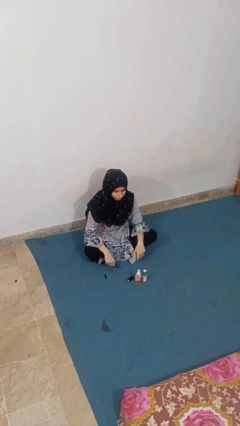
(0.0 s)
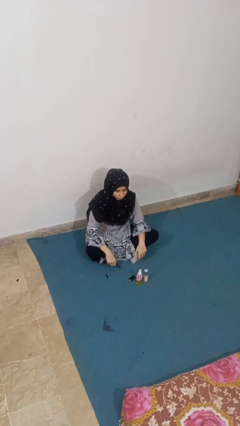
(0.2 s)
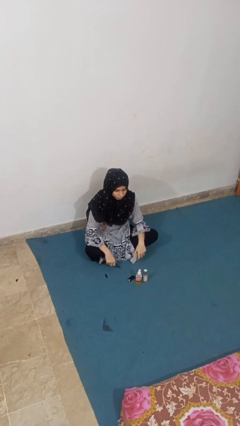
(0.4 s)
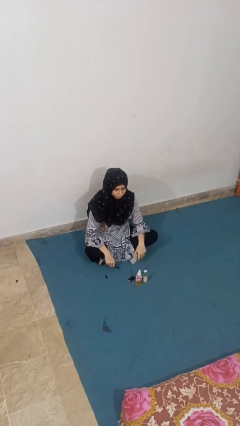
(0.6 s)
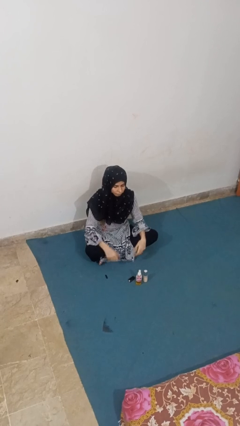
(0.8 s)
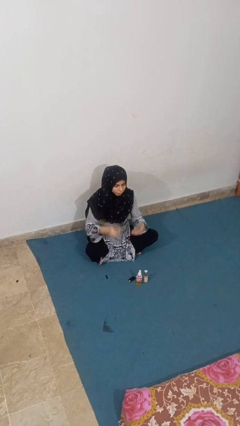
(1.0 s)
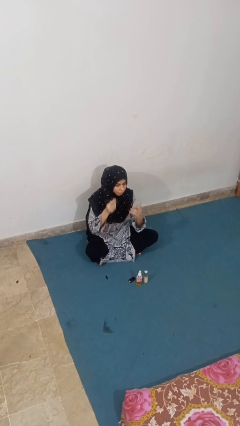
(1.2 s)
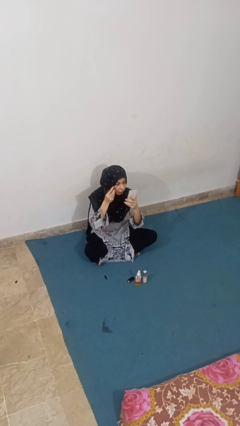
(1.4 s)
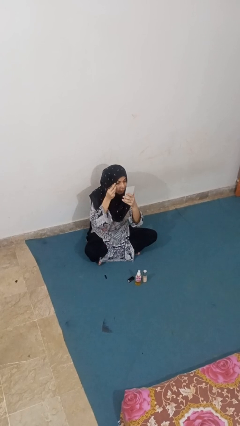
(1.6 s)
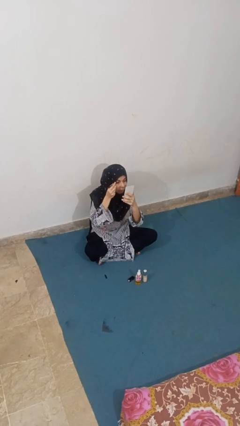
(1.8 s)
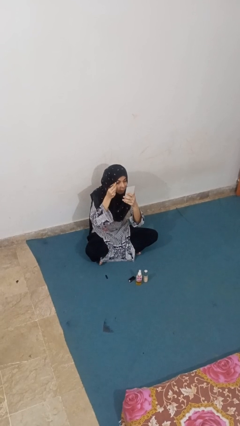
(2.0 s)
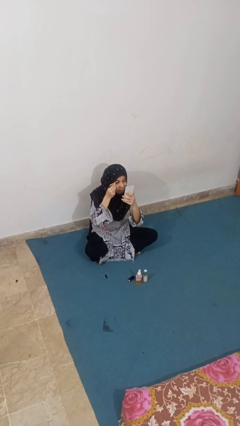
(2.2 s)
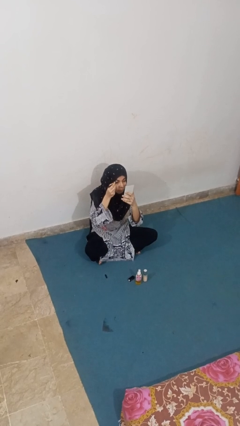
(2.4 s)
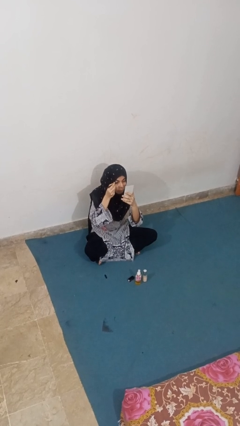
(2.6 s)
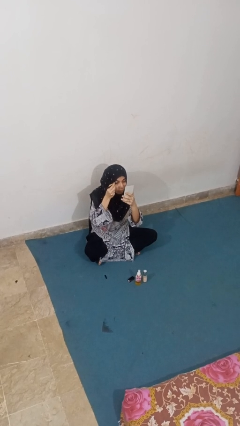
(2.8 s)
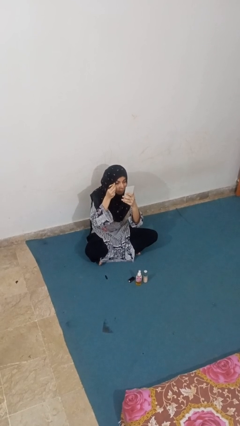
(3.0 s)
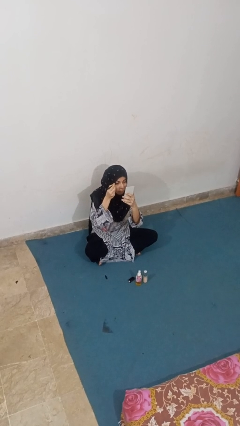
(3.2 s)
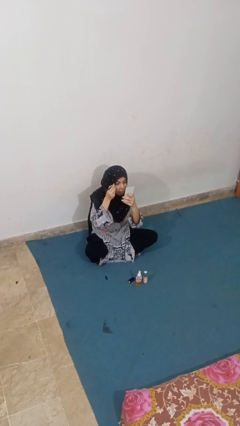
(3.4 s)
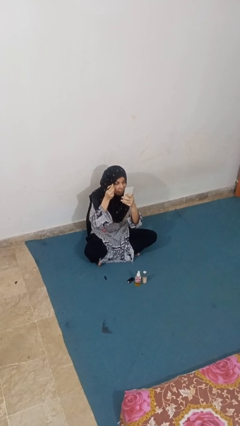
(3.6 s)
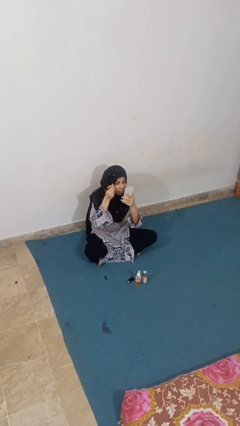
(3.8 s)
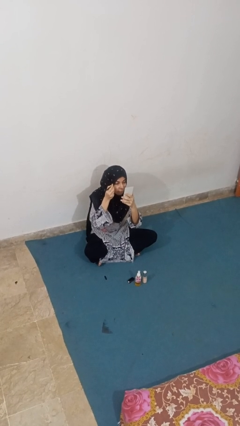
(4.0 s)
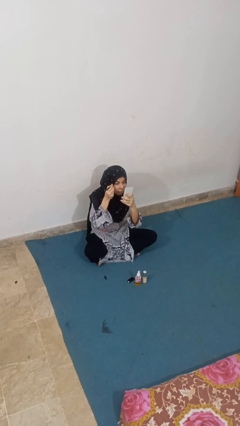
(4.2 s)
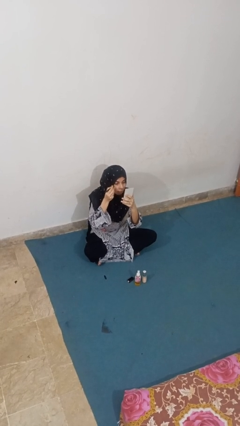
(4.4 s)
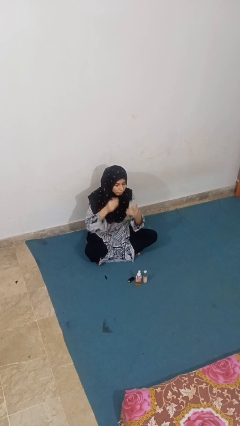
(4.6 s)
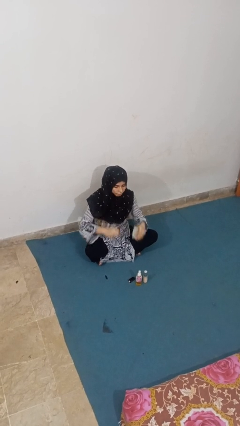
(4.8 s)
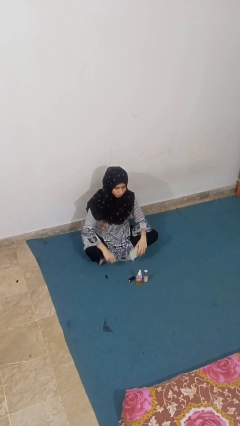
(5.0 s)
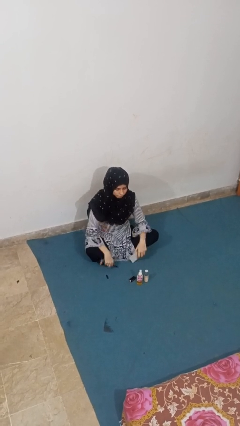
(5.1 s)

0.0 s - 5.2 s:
person applies eye makeup

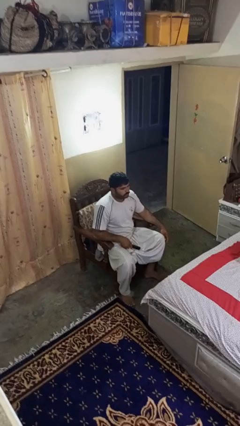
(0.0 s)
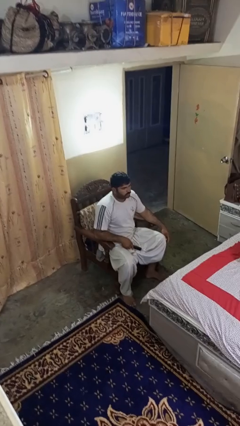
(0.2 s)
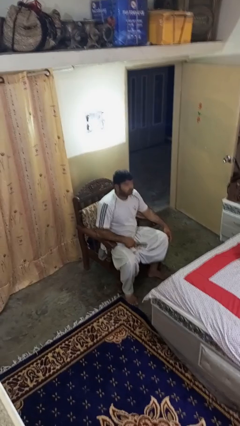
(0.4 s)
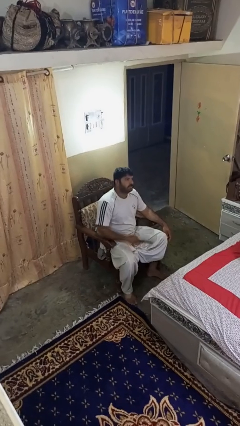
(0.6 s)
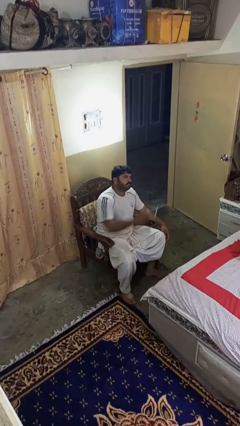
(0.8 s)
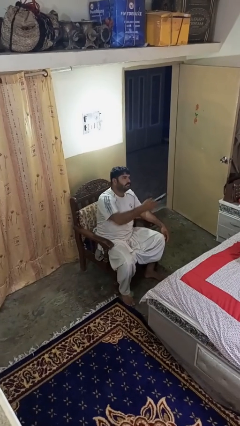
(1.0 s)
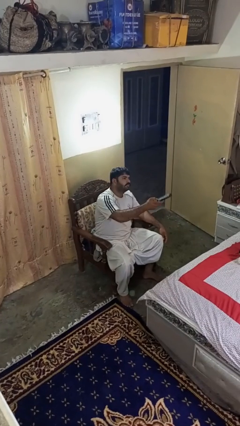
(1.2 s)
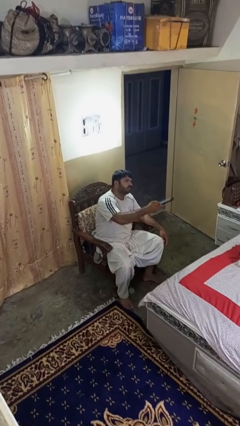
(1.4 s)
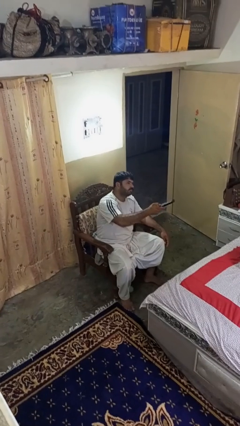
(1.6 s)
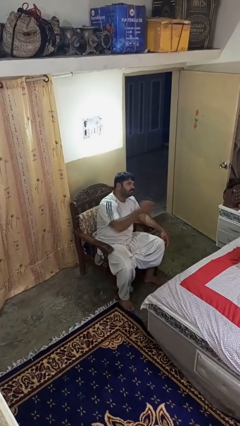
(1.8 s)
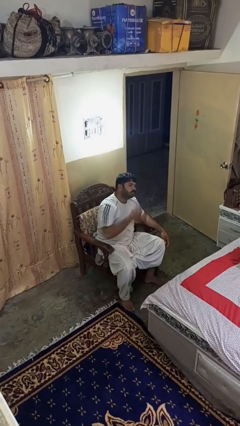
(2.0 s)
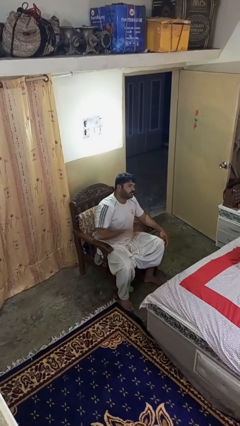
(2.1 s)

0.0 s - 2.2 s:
person uses television remote

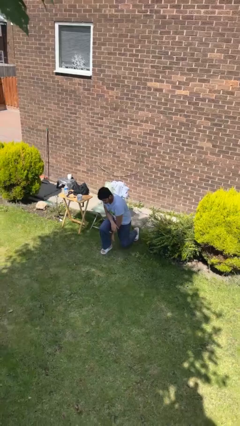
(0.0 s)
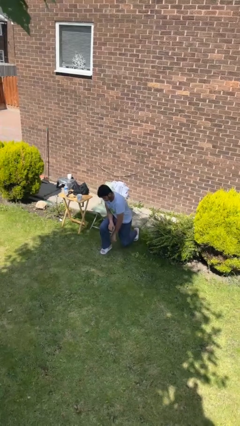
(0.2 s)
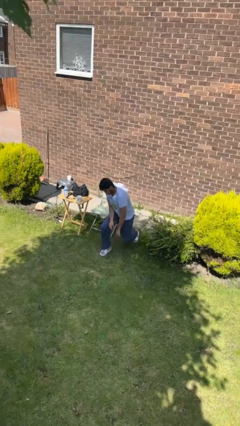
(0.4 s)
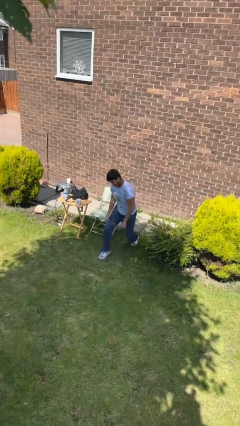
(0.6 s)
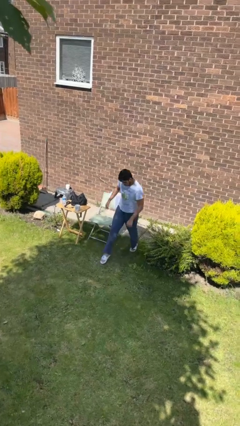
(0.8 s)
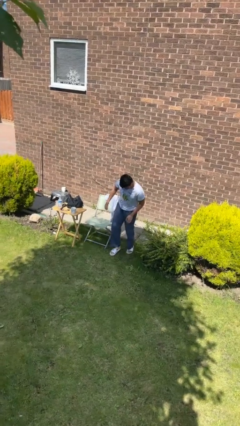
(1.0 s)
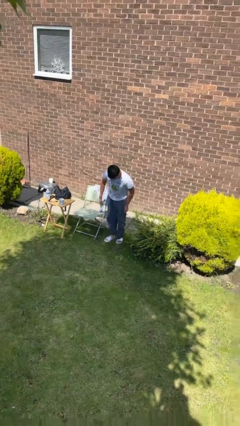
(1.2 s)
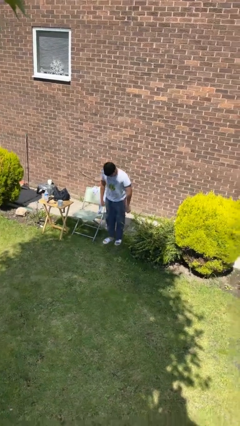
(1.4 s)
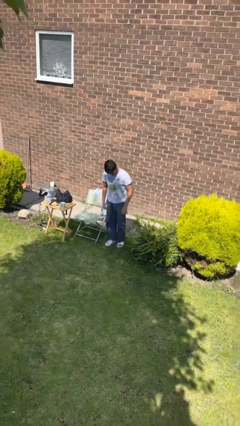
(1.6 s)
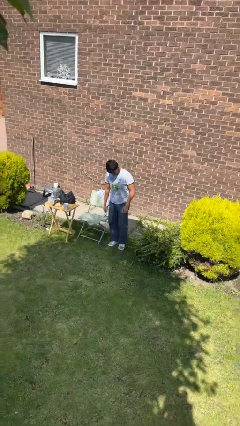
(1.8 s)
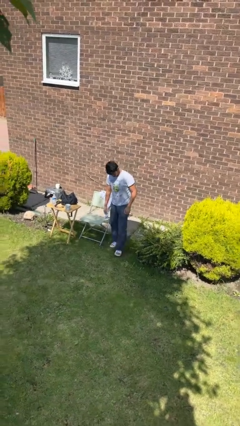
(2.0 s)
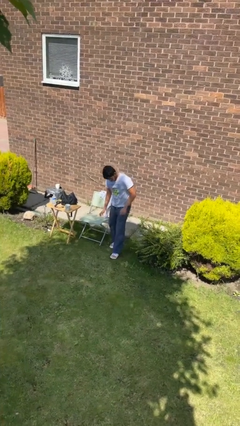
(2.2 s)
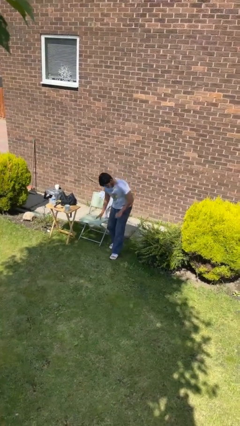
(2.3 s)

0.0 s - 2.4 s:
person stands up from floor

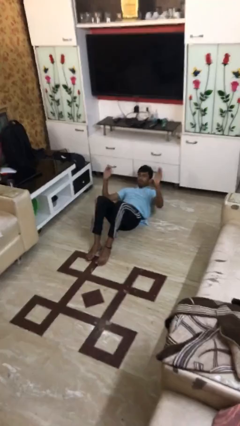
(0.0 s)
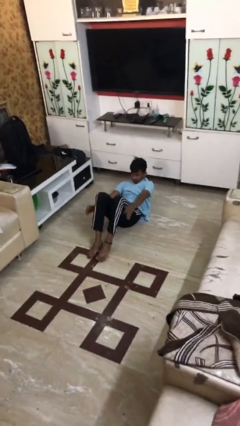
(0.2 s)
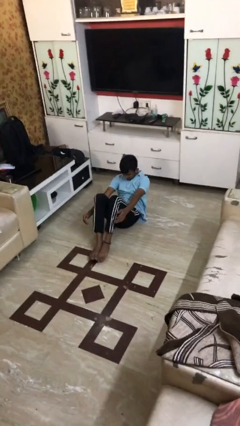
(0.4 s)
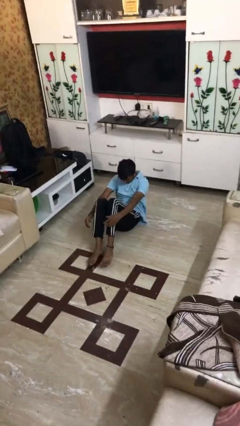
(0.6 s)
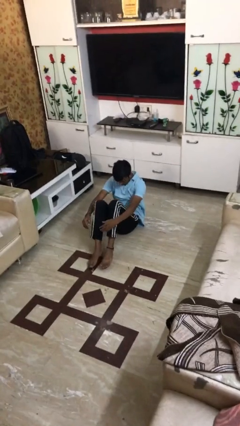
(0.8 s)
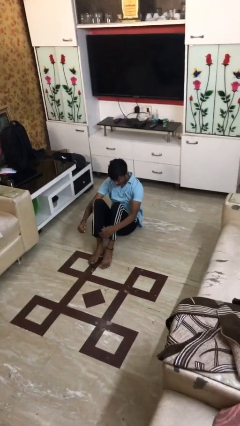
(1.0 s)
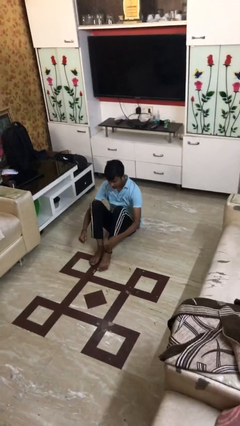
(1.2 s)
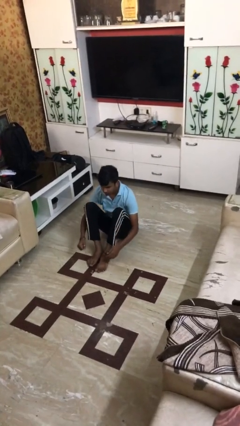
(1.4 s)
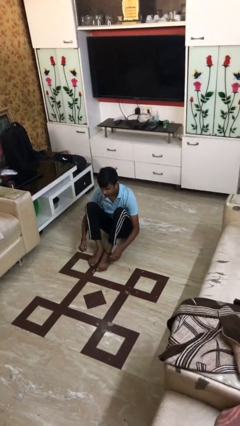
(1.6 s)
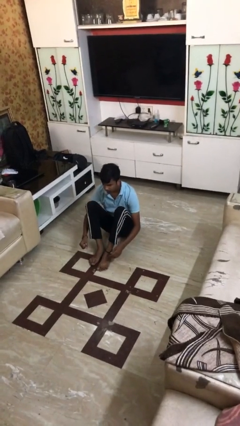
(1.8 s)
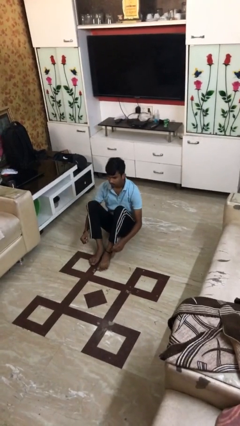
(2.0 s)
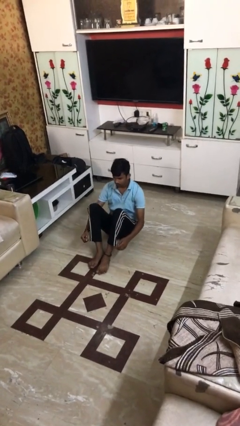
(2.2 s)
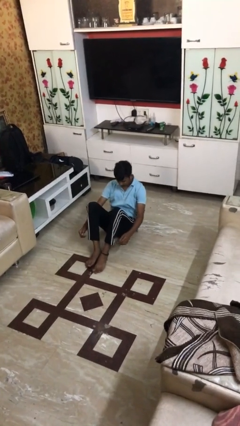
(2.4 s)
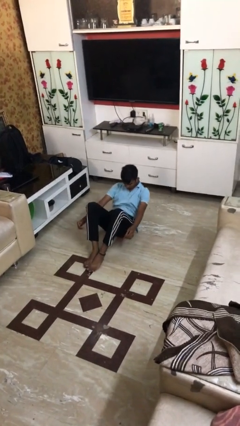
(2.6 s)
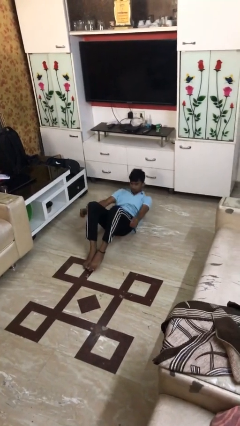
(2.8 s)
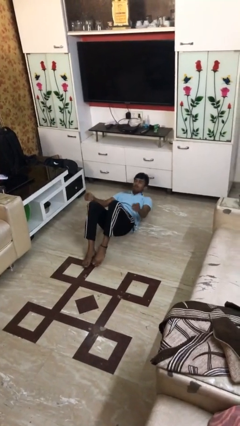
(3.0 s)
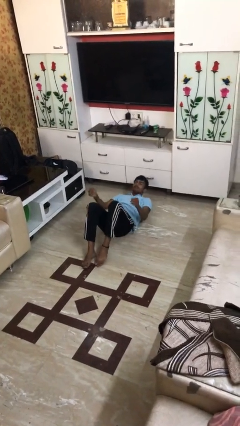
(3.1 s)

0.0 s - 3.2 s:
person exercises with situp

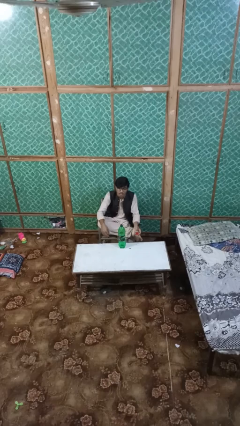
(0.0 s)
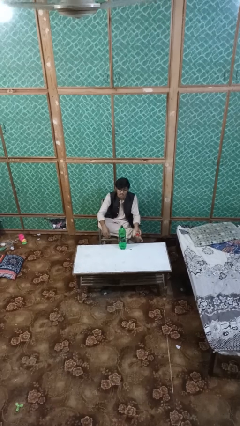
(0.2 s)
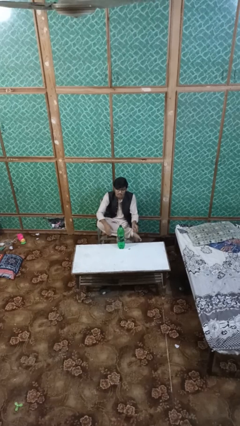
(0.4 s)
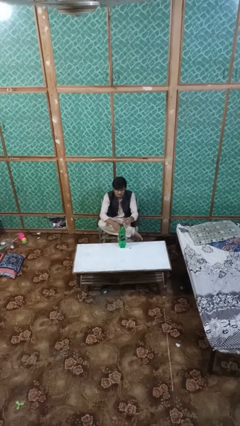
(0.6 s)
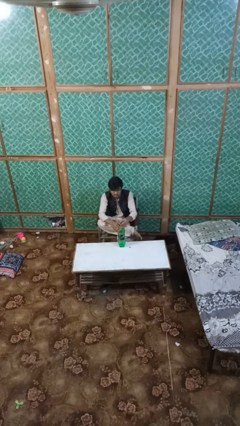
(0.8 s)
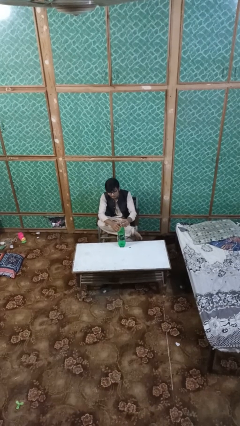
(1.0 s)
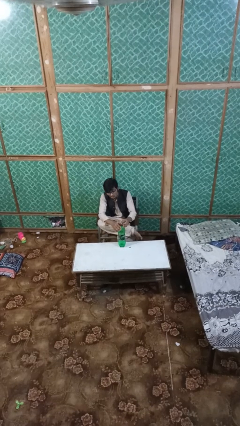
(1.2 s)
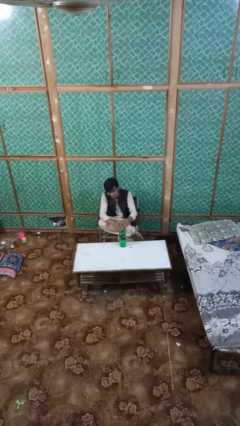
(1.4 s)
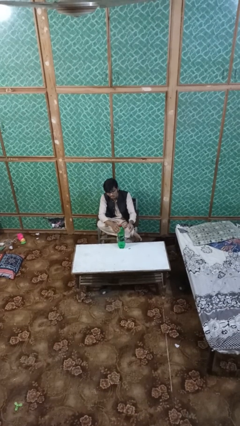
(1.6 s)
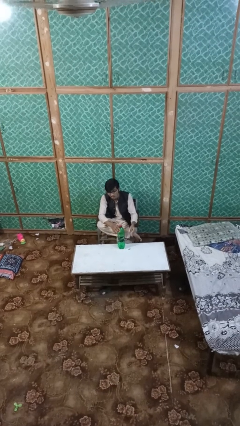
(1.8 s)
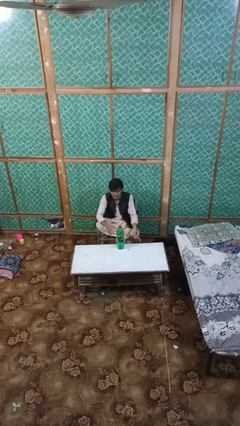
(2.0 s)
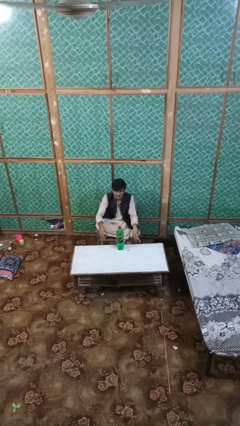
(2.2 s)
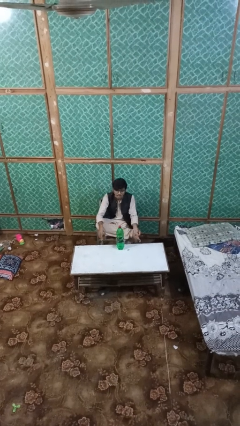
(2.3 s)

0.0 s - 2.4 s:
person screws lid to bottle

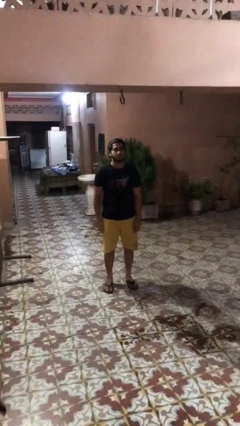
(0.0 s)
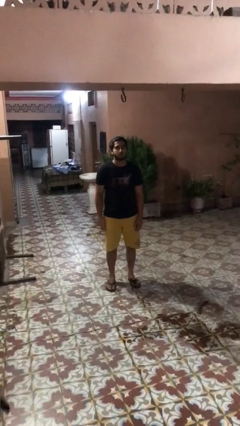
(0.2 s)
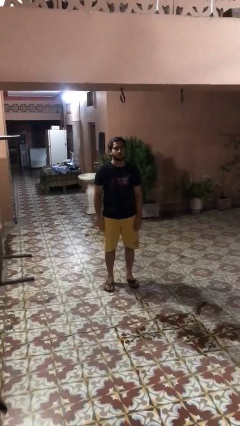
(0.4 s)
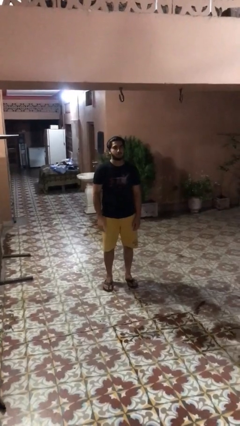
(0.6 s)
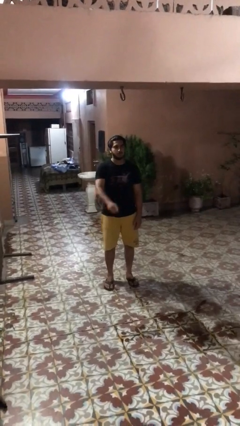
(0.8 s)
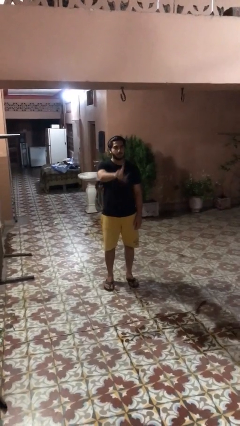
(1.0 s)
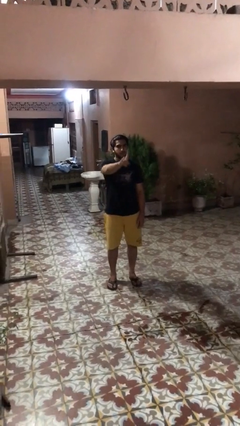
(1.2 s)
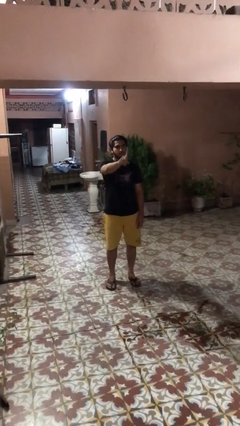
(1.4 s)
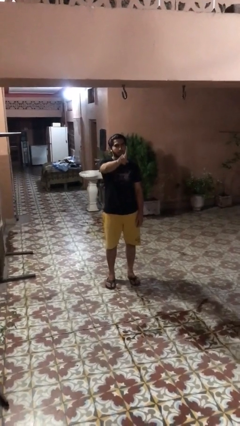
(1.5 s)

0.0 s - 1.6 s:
person gestures number one

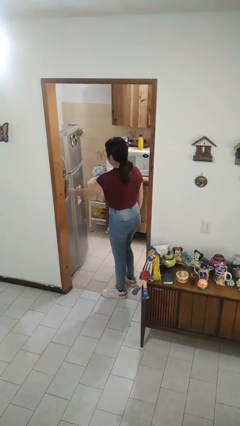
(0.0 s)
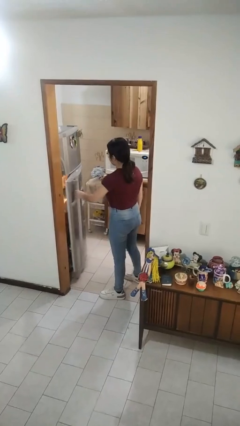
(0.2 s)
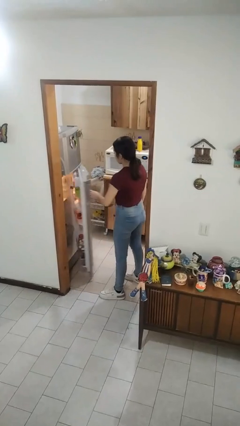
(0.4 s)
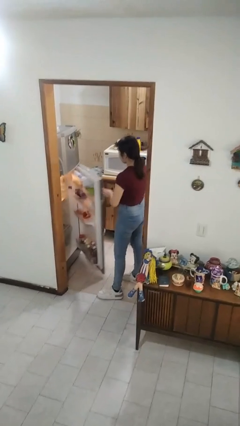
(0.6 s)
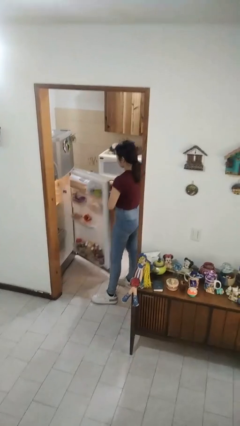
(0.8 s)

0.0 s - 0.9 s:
person opens refrigerator
